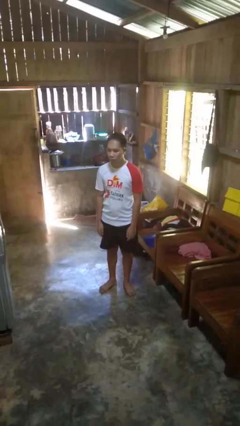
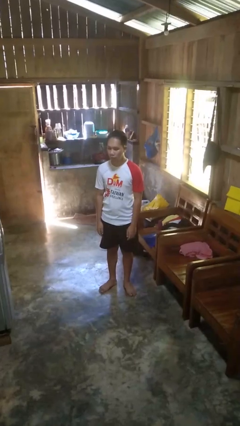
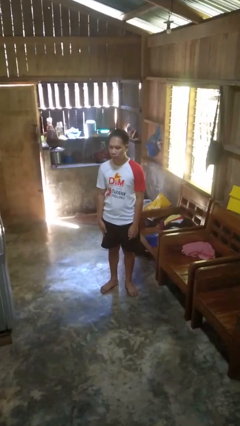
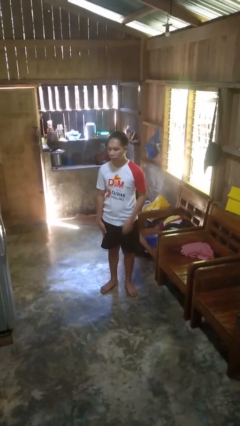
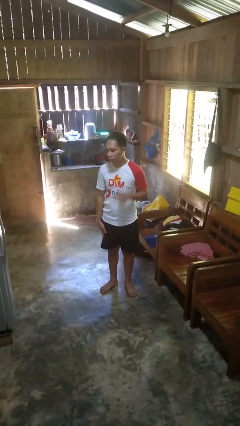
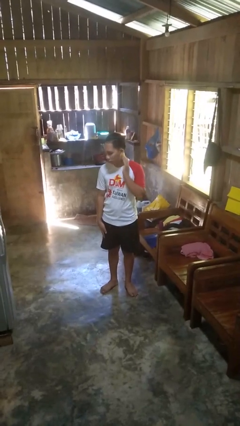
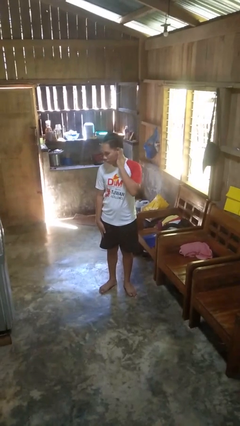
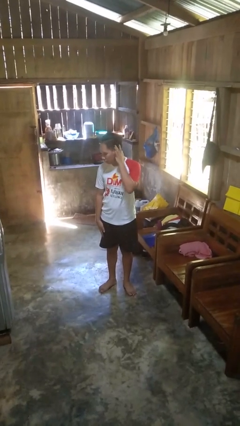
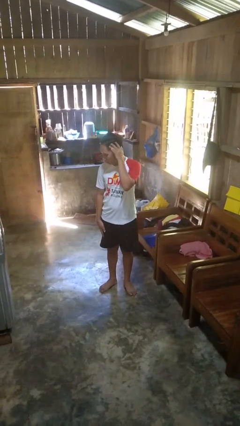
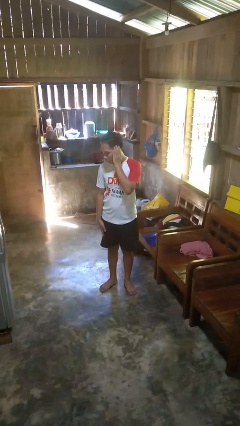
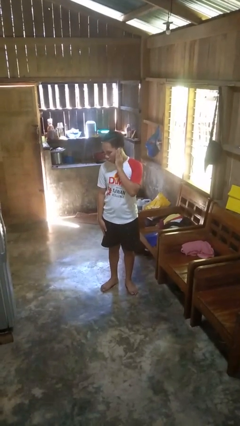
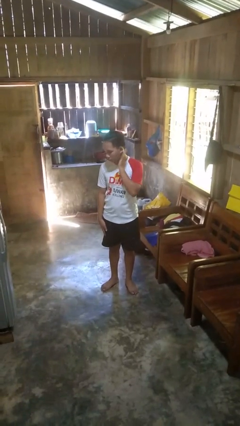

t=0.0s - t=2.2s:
person scratches face

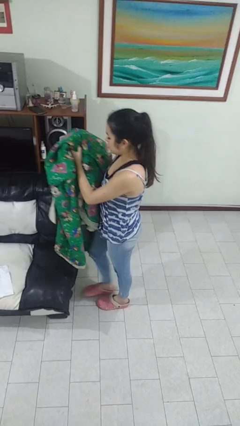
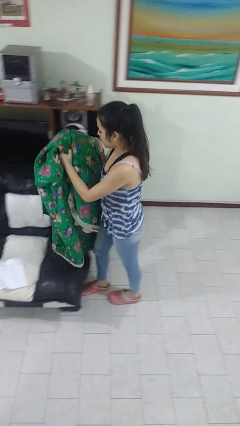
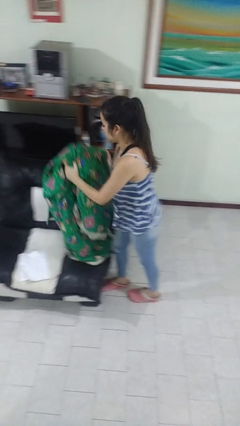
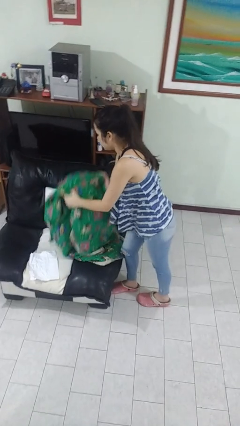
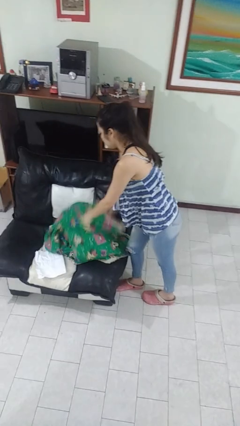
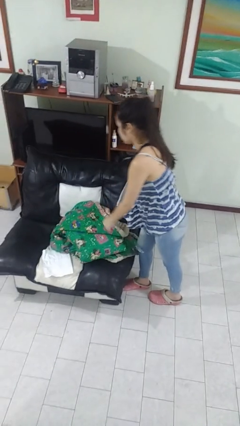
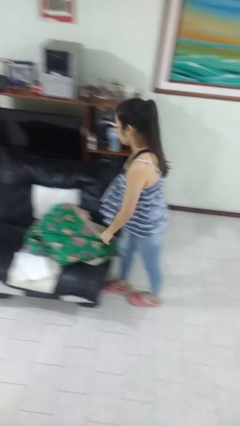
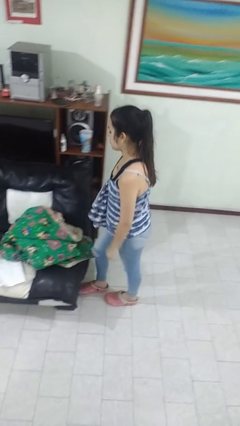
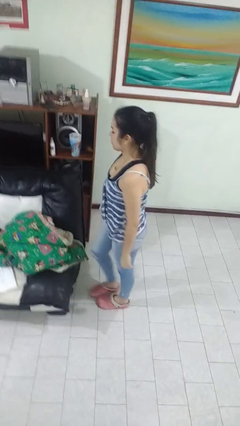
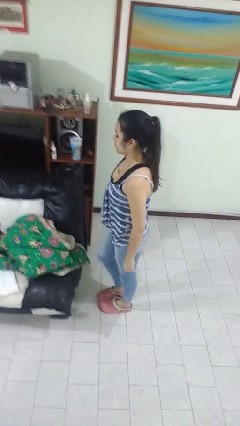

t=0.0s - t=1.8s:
person puts down object on couch

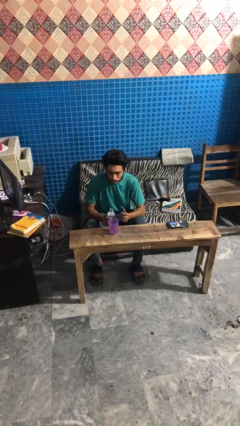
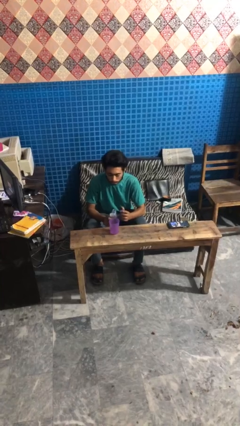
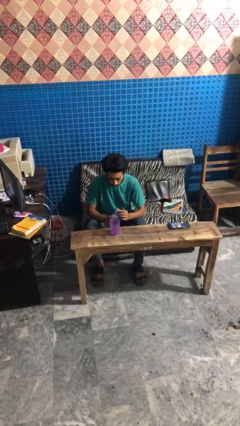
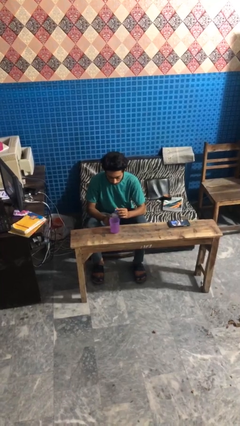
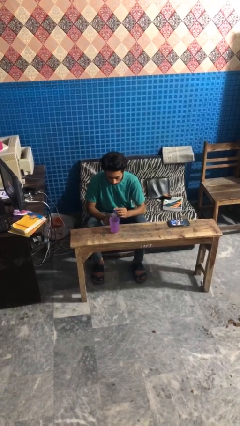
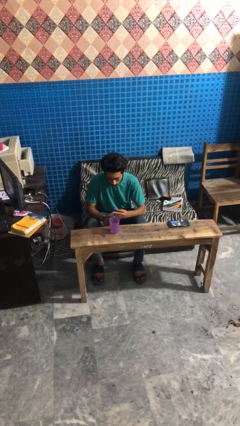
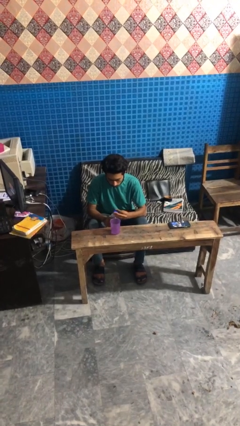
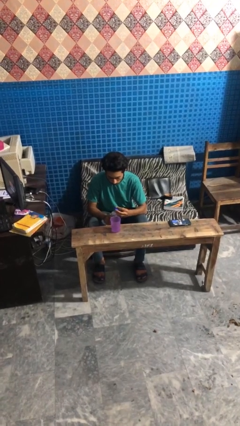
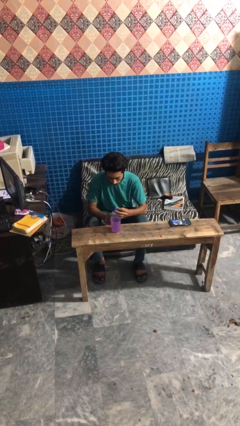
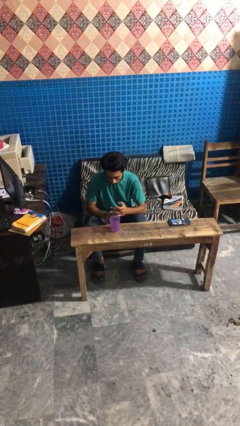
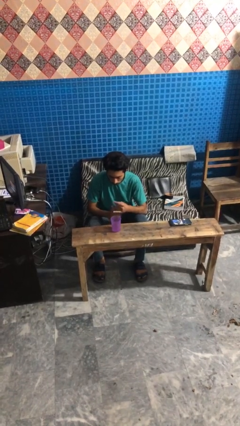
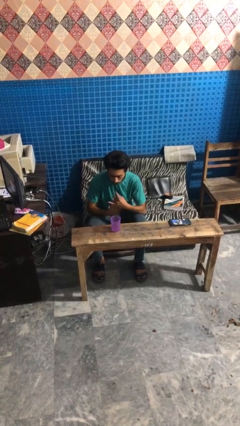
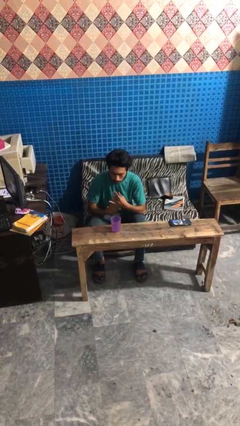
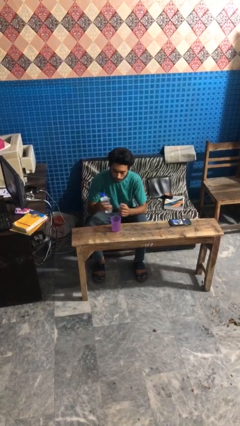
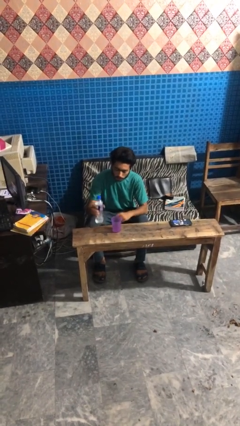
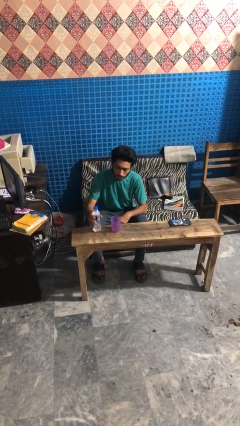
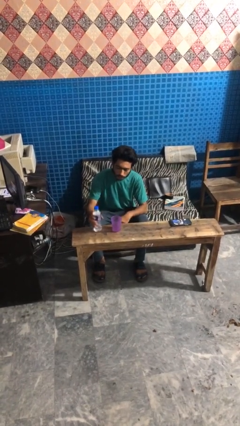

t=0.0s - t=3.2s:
person screws lid to bottle

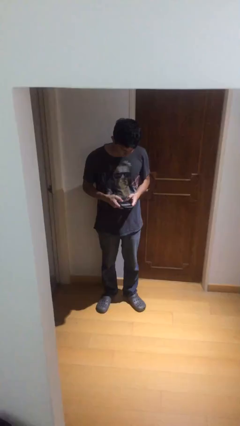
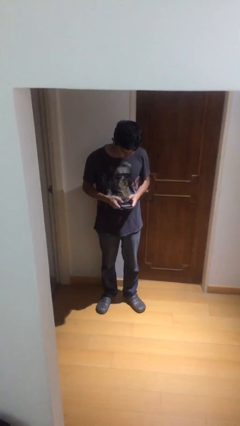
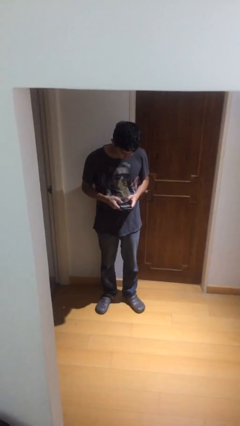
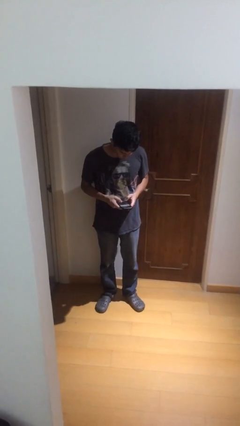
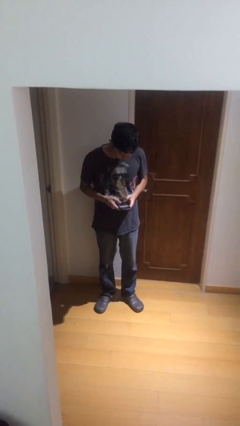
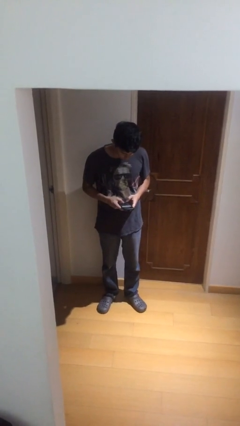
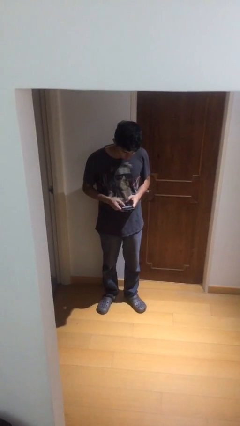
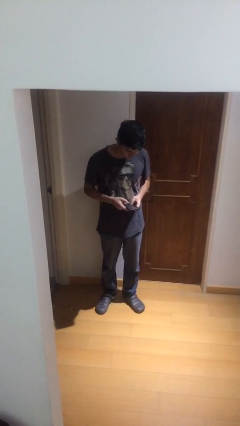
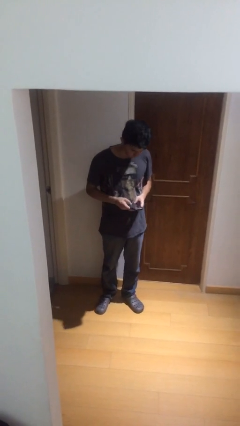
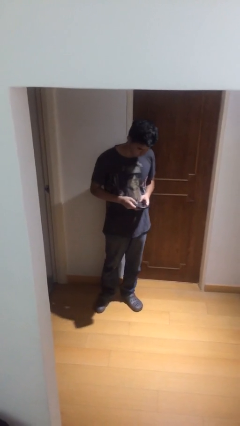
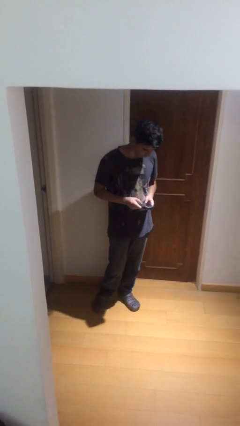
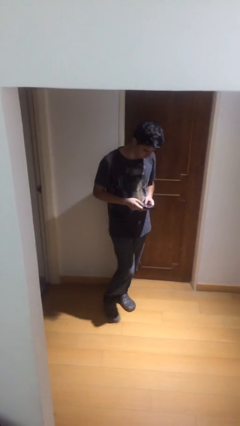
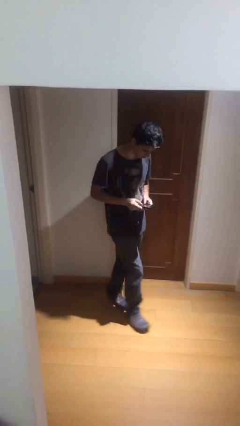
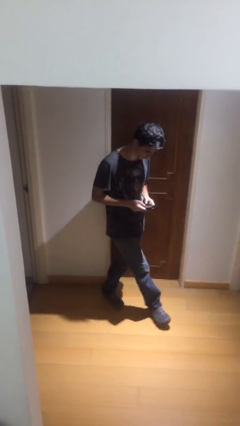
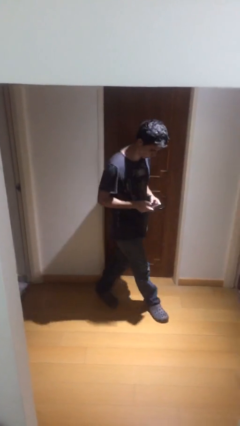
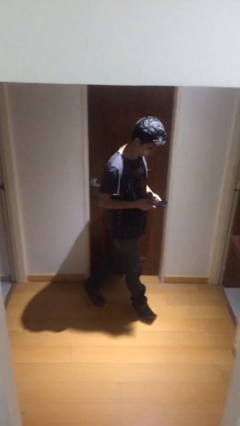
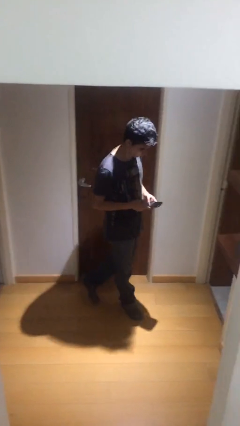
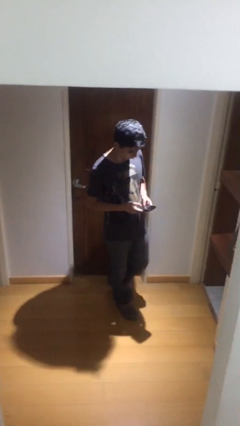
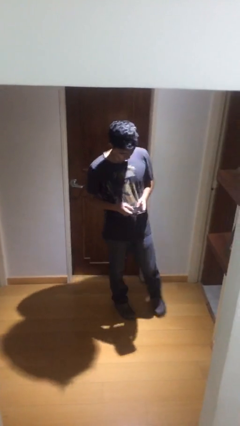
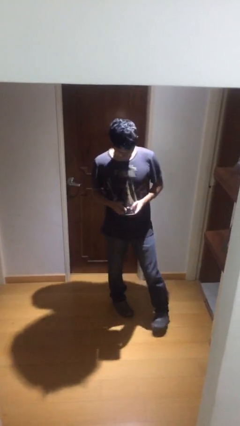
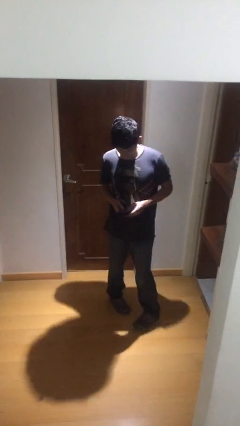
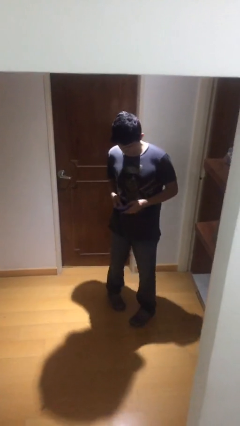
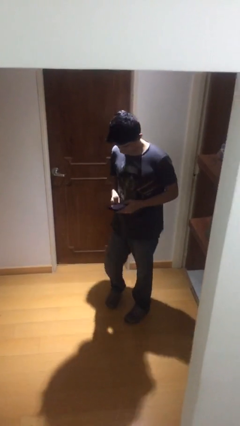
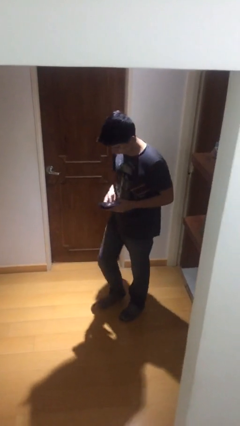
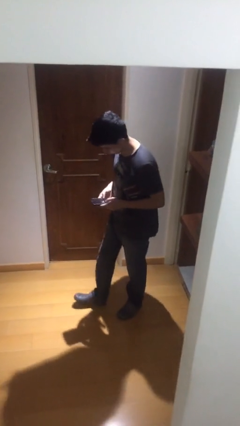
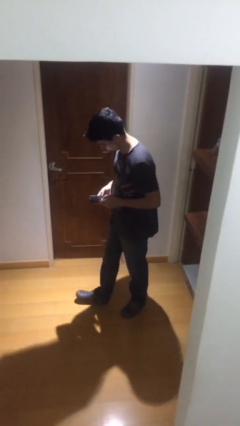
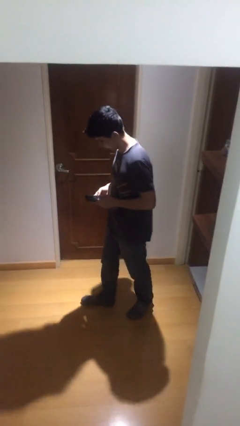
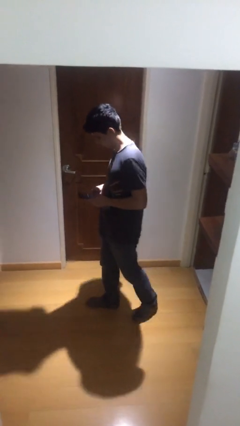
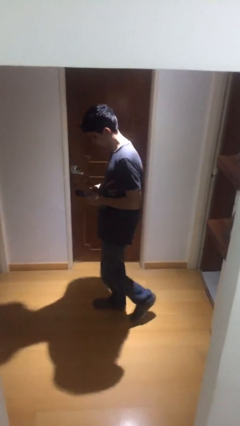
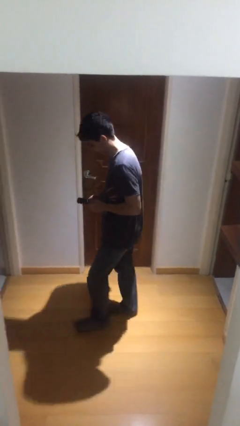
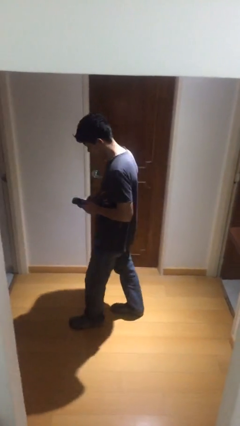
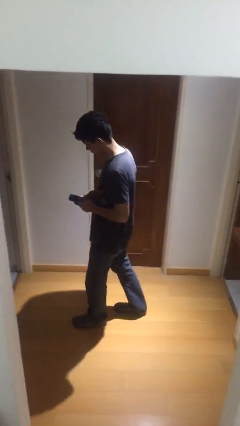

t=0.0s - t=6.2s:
person texts on phone

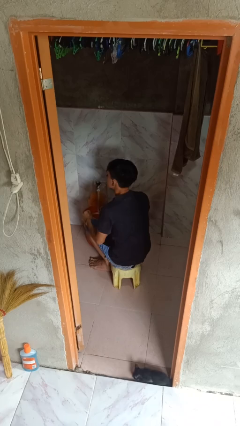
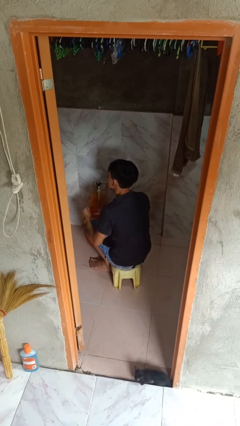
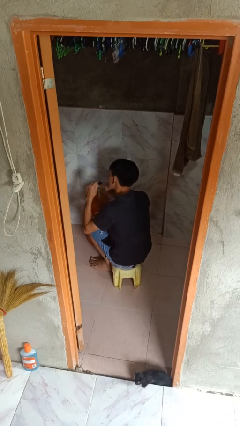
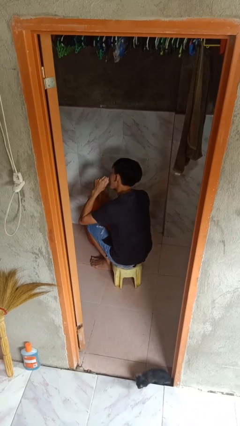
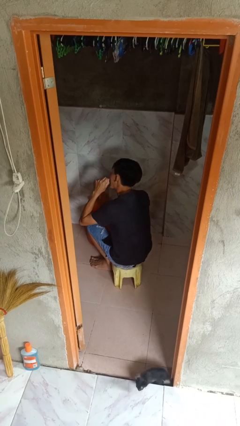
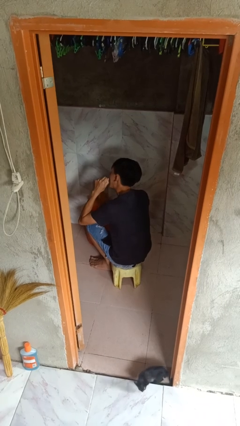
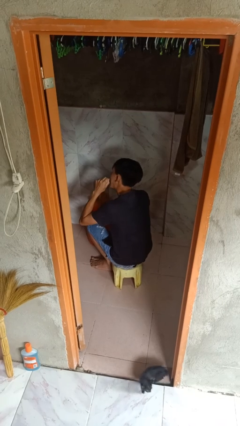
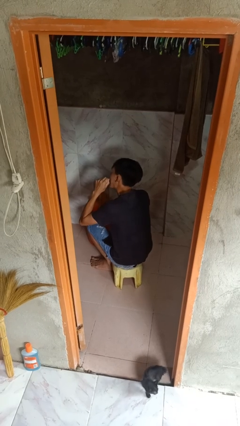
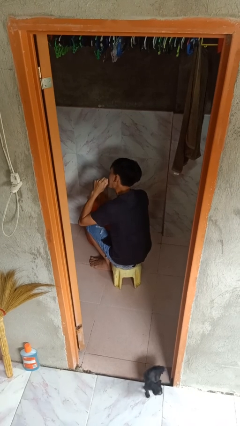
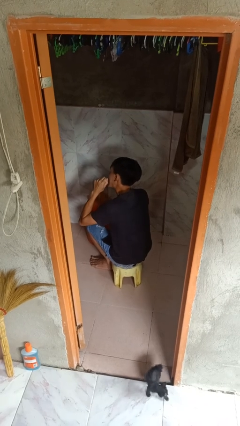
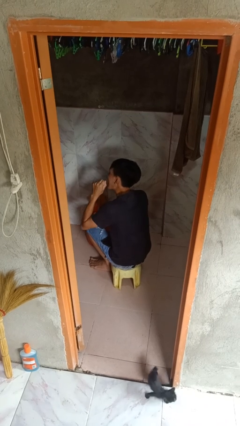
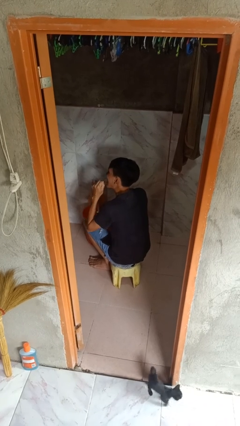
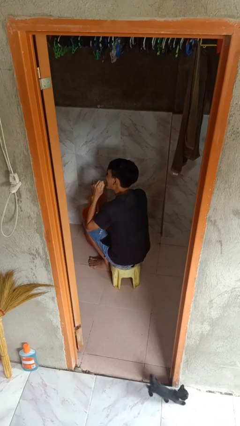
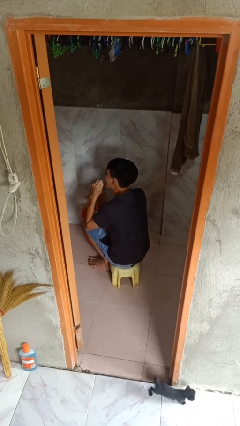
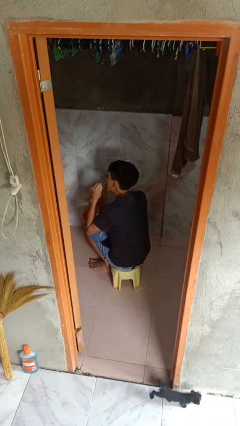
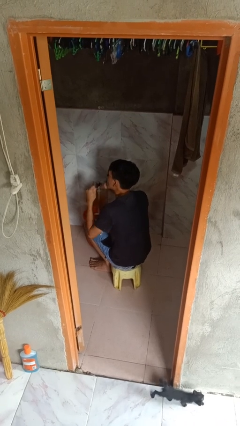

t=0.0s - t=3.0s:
person flosses

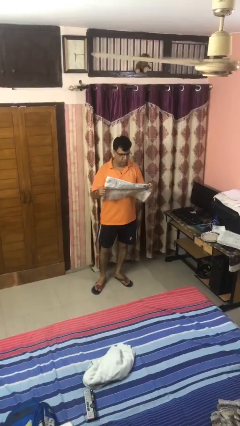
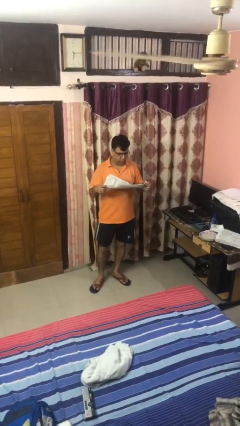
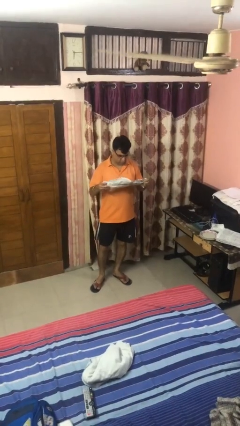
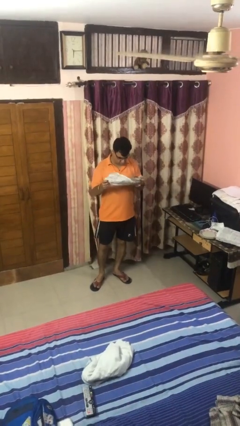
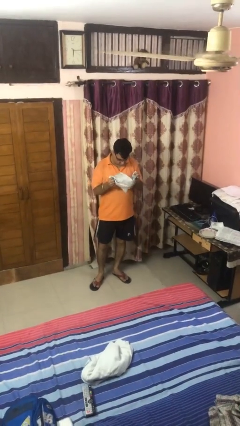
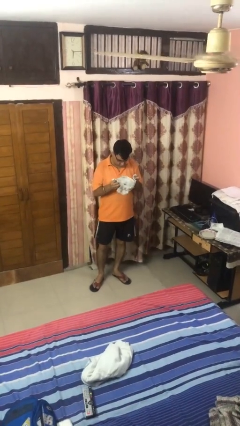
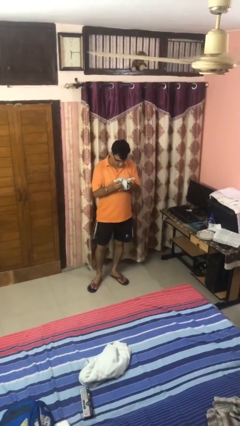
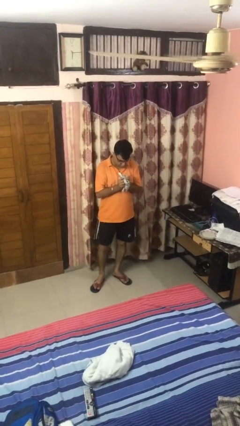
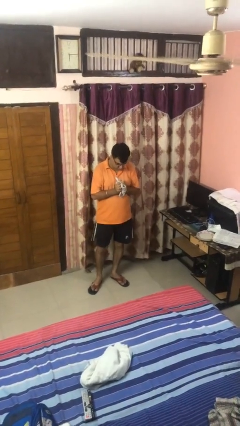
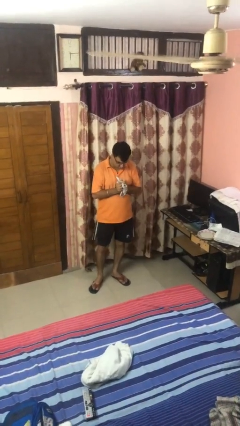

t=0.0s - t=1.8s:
person crumples paper
